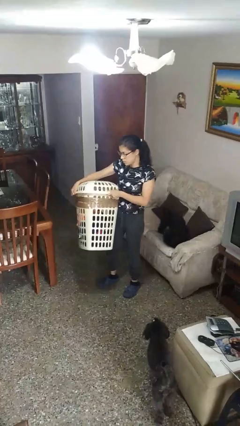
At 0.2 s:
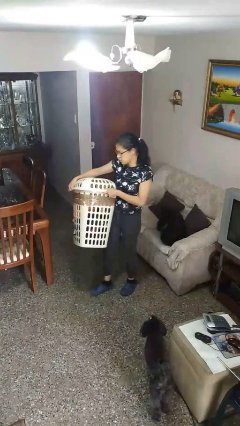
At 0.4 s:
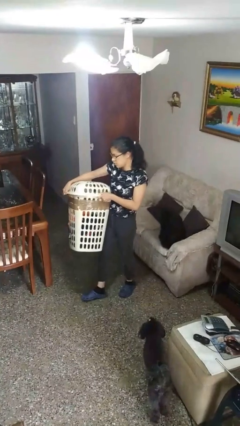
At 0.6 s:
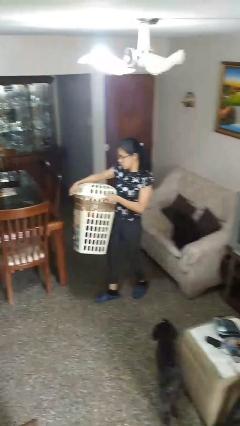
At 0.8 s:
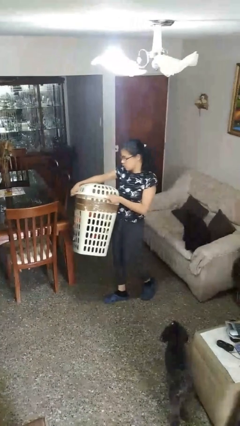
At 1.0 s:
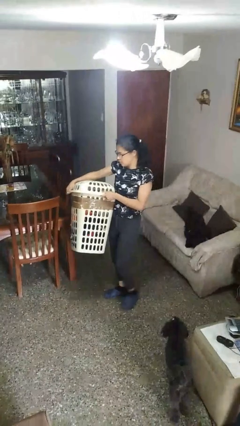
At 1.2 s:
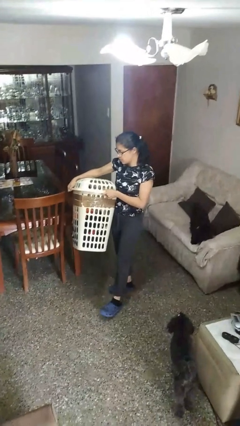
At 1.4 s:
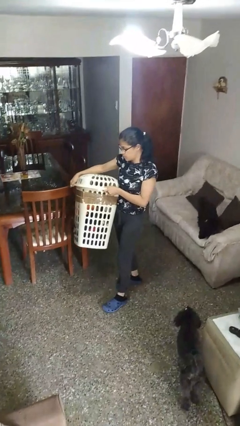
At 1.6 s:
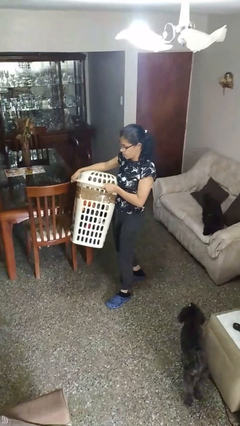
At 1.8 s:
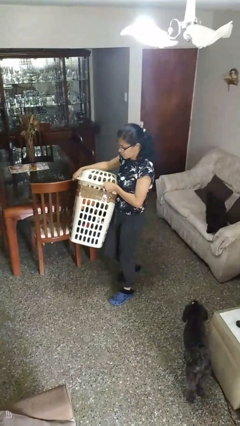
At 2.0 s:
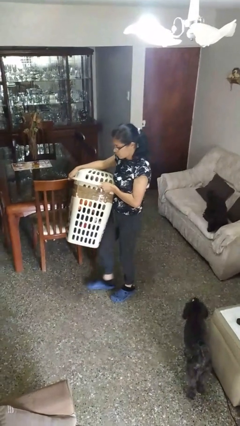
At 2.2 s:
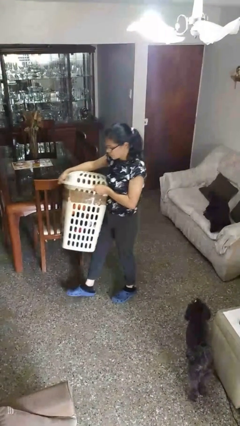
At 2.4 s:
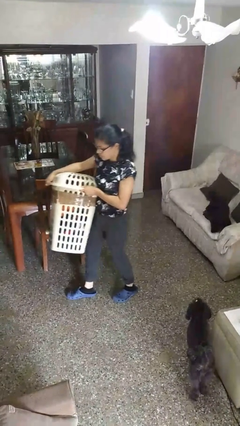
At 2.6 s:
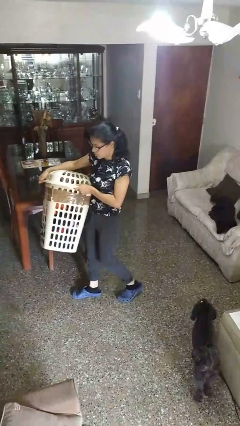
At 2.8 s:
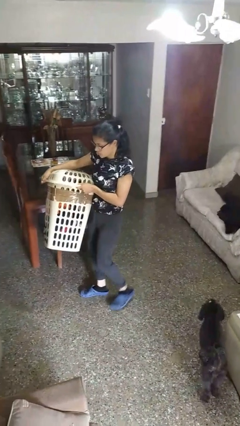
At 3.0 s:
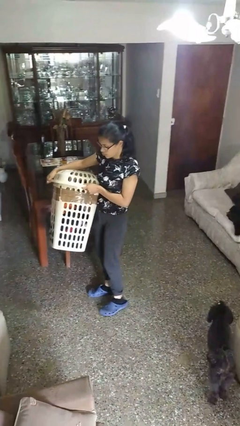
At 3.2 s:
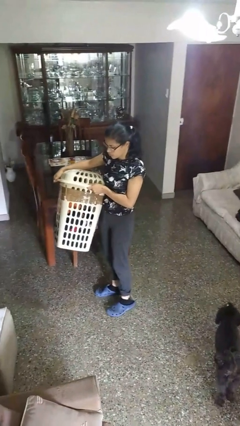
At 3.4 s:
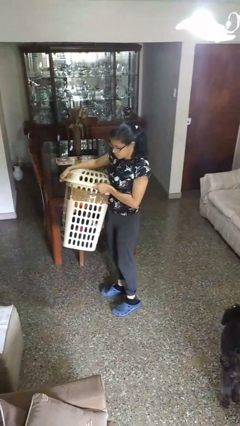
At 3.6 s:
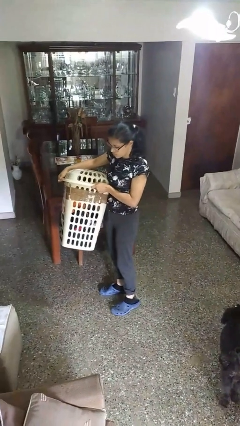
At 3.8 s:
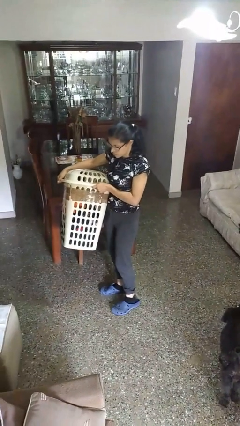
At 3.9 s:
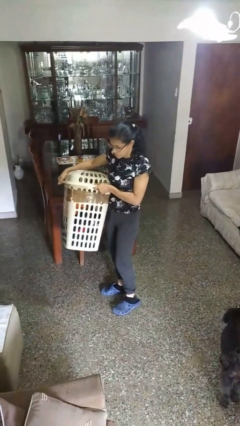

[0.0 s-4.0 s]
person carries laundry basket

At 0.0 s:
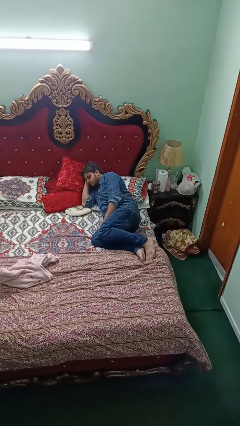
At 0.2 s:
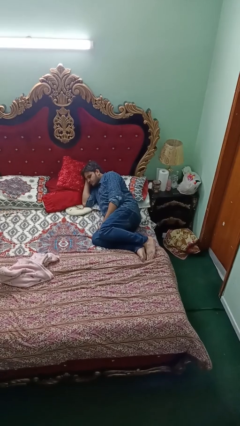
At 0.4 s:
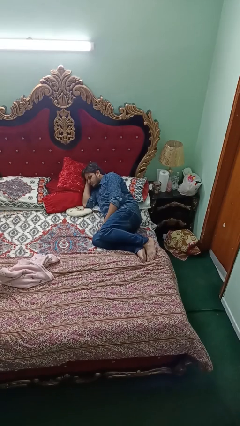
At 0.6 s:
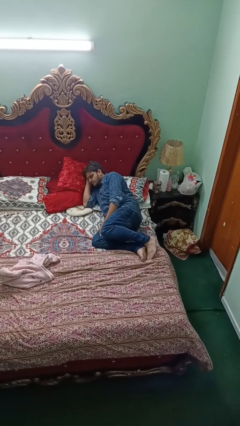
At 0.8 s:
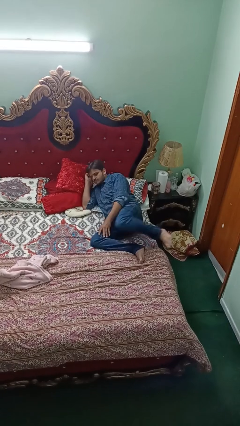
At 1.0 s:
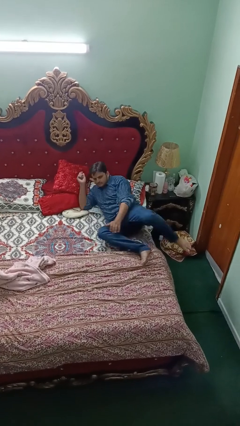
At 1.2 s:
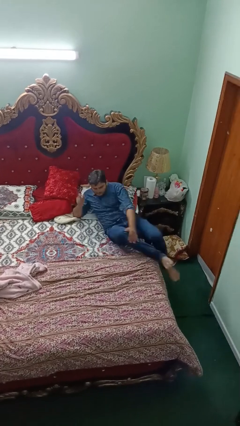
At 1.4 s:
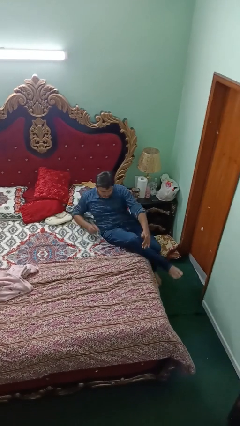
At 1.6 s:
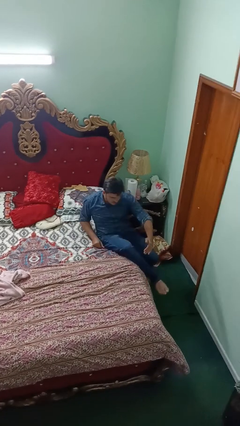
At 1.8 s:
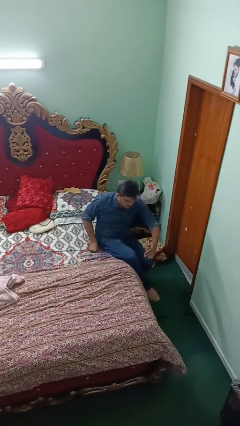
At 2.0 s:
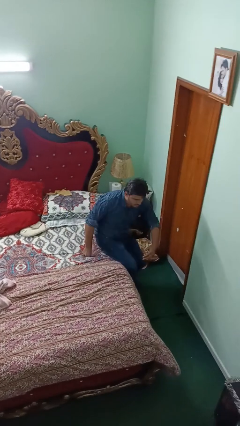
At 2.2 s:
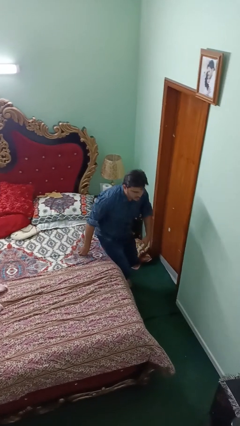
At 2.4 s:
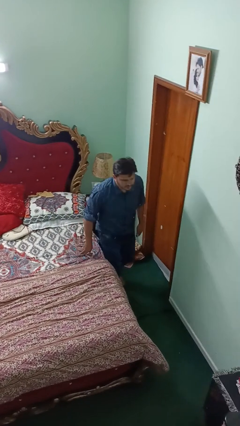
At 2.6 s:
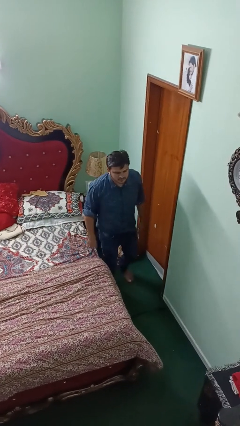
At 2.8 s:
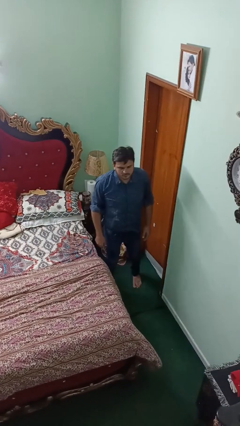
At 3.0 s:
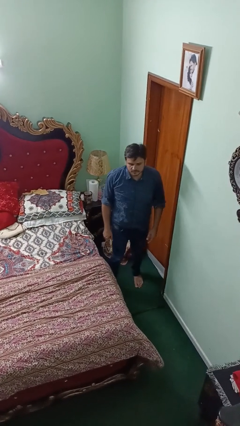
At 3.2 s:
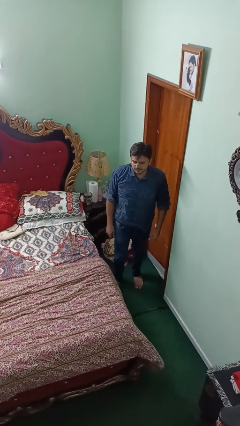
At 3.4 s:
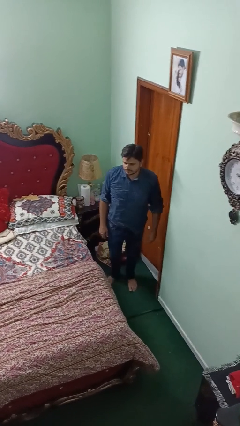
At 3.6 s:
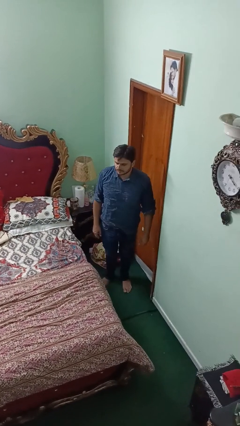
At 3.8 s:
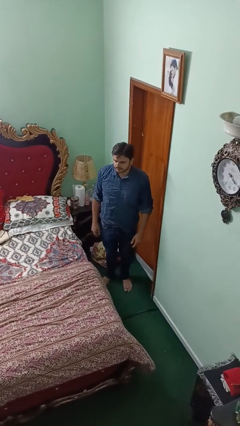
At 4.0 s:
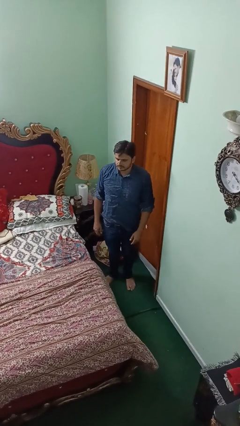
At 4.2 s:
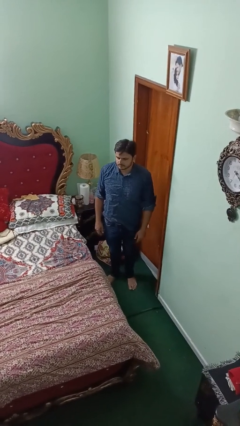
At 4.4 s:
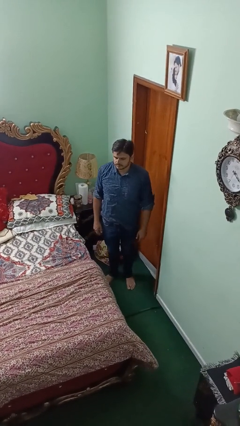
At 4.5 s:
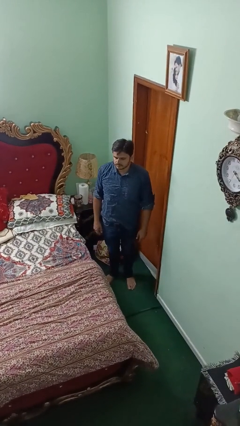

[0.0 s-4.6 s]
person stands up

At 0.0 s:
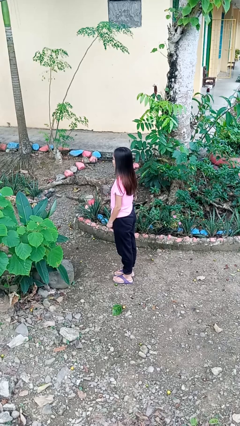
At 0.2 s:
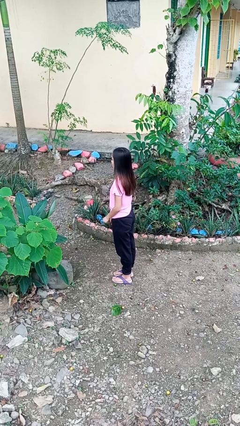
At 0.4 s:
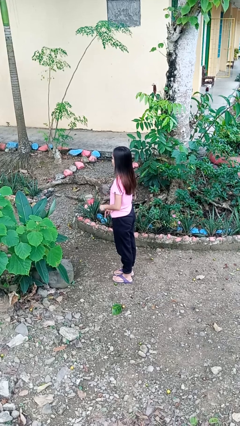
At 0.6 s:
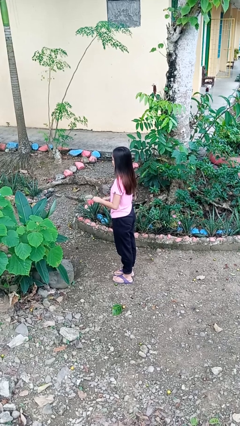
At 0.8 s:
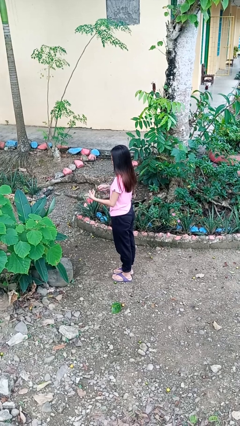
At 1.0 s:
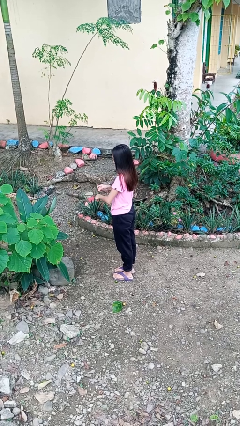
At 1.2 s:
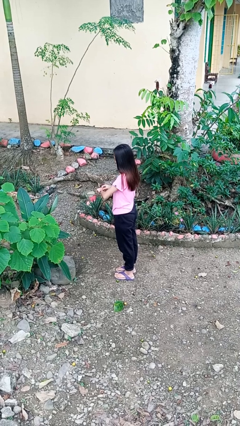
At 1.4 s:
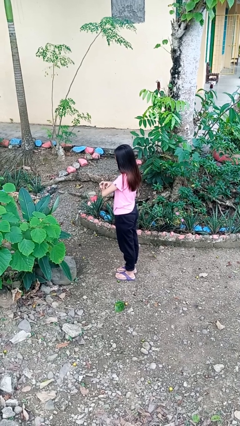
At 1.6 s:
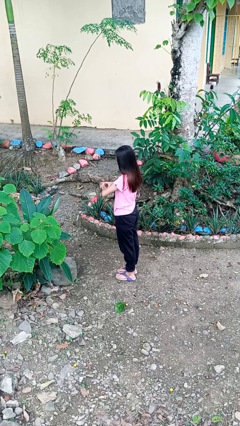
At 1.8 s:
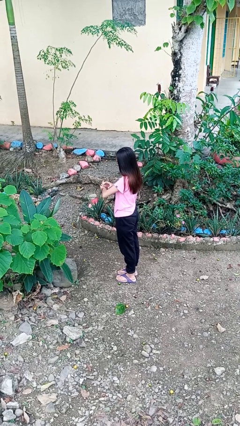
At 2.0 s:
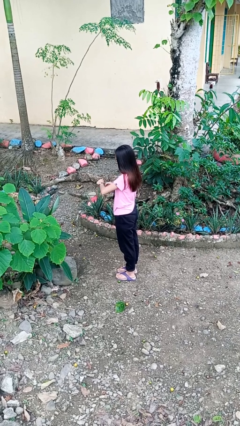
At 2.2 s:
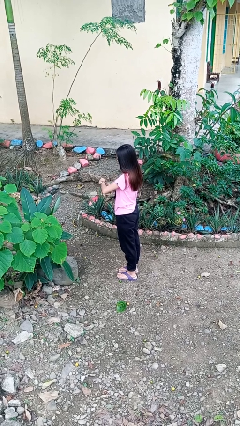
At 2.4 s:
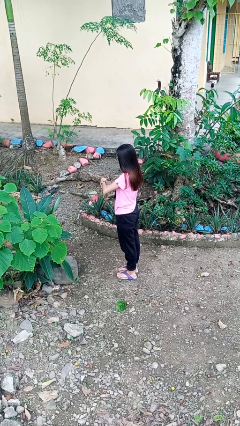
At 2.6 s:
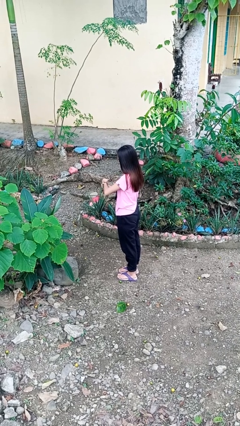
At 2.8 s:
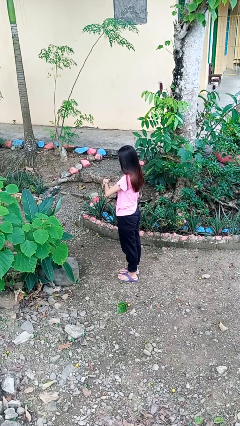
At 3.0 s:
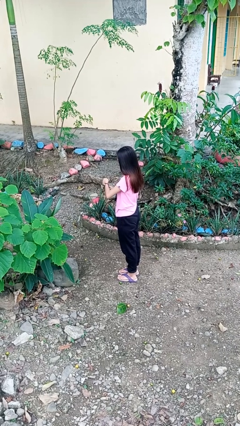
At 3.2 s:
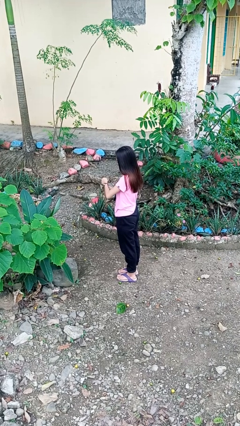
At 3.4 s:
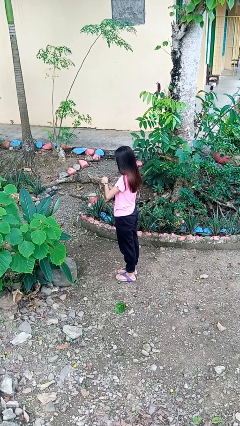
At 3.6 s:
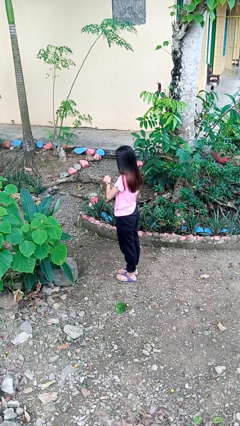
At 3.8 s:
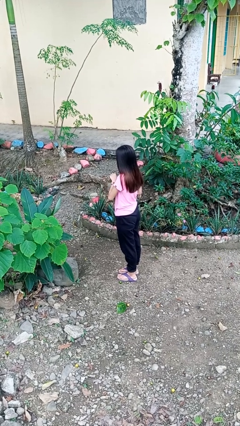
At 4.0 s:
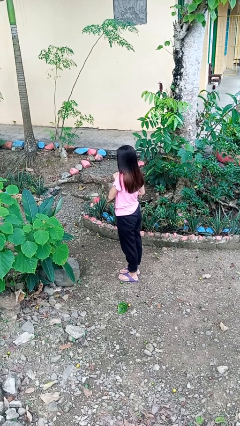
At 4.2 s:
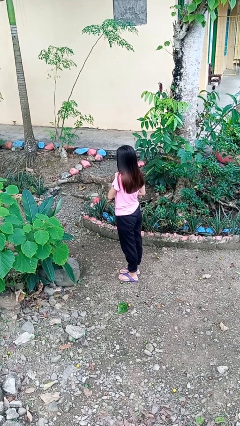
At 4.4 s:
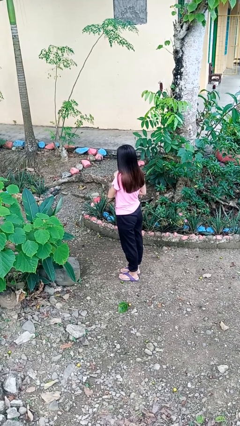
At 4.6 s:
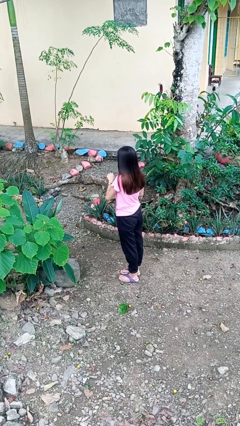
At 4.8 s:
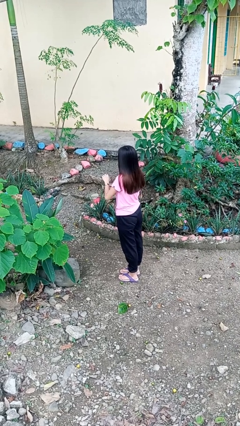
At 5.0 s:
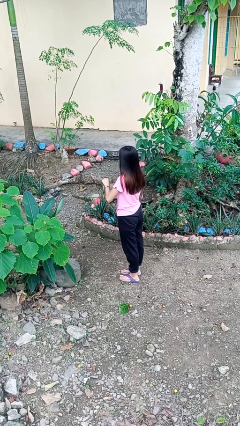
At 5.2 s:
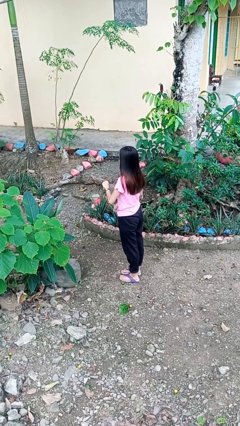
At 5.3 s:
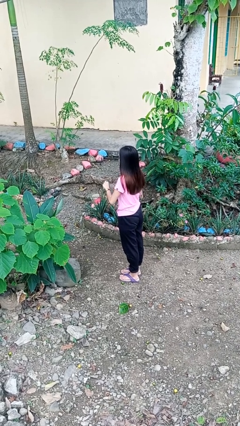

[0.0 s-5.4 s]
person puts on wristwatch

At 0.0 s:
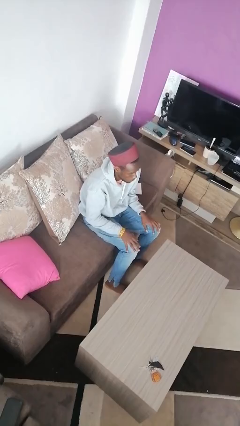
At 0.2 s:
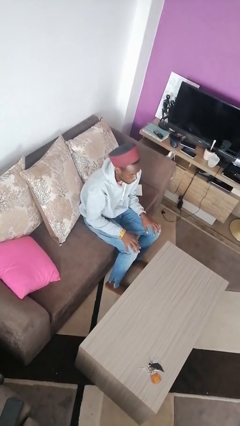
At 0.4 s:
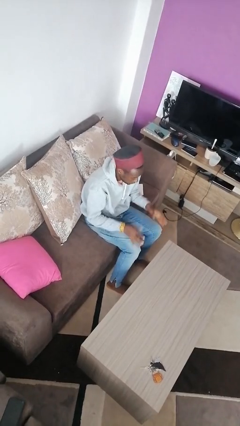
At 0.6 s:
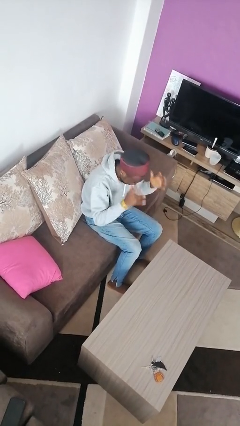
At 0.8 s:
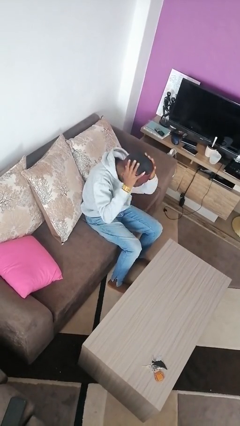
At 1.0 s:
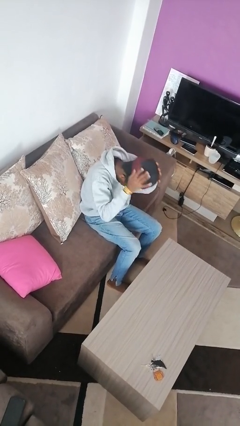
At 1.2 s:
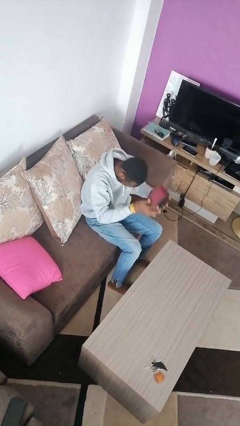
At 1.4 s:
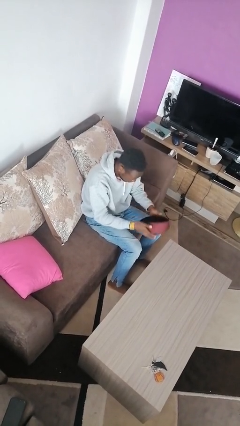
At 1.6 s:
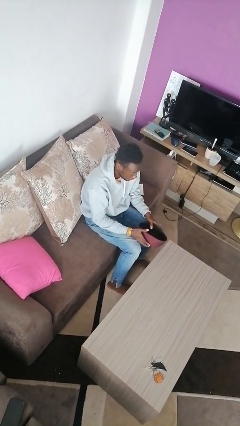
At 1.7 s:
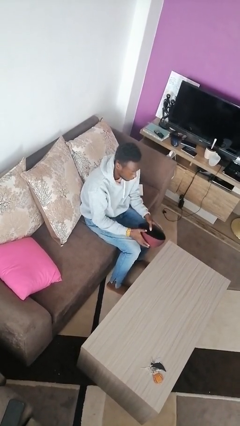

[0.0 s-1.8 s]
person takes off hat

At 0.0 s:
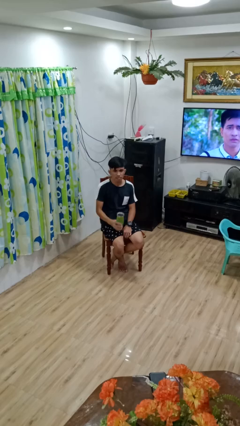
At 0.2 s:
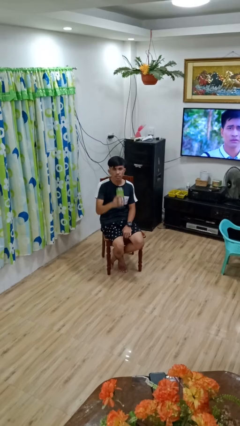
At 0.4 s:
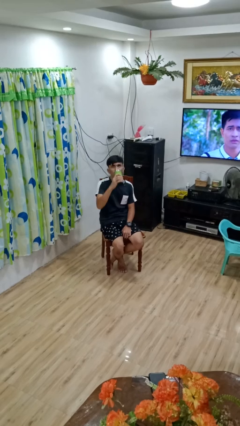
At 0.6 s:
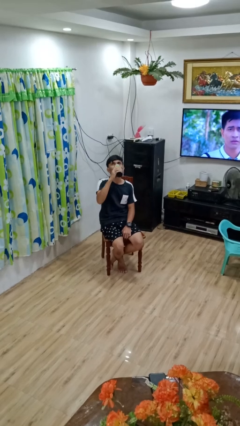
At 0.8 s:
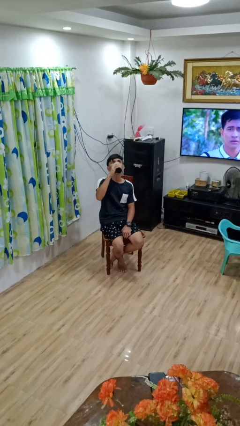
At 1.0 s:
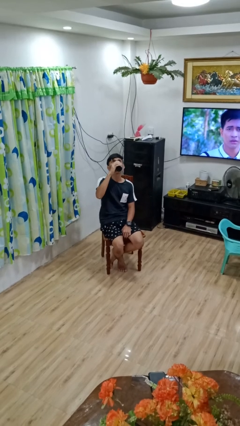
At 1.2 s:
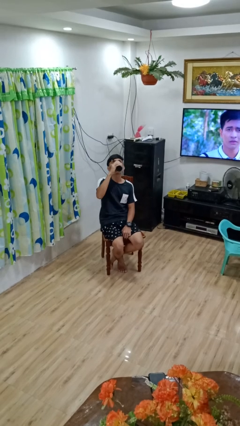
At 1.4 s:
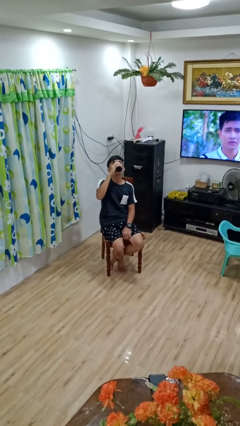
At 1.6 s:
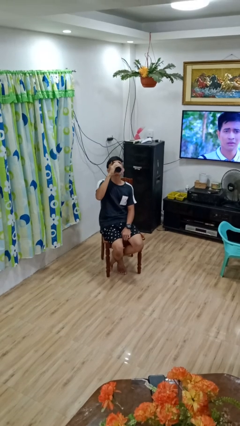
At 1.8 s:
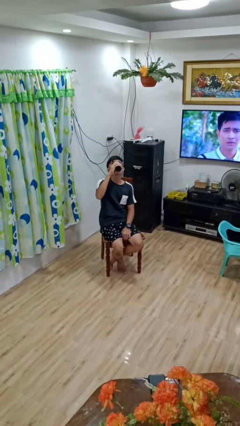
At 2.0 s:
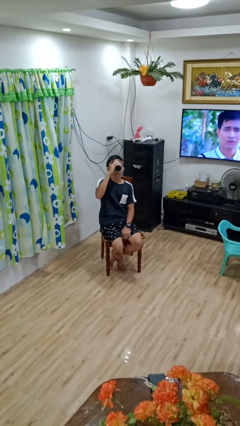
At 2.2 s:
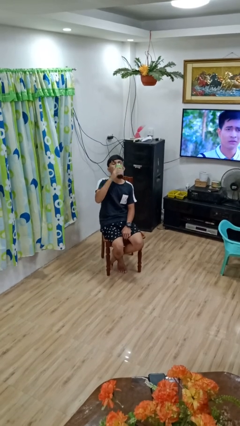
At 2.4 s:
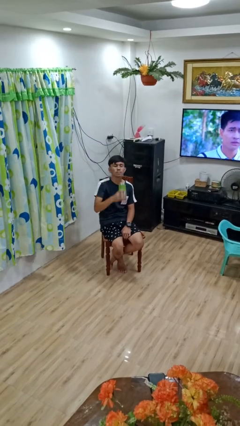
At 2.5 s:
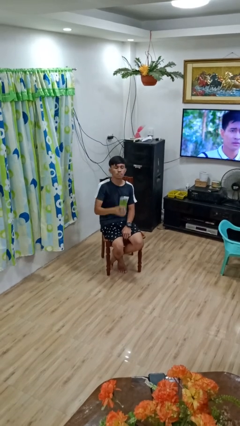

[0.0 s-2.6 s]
person drinks from bottle
